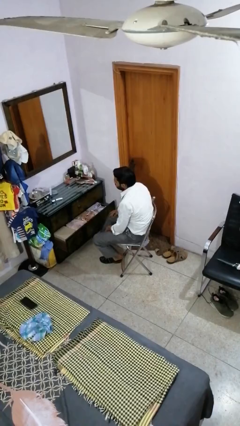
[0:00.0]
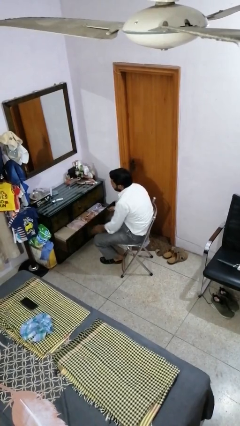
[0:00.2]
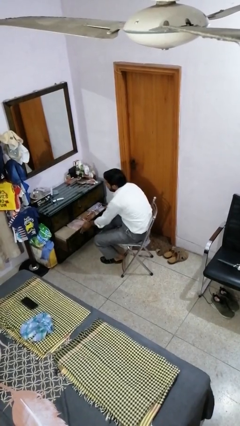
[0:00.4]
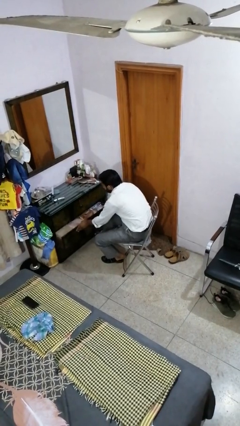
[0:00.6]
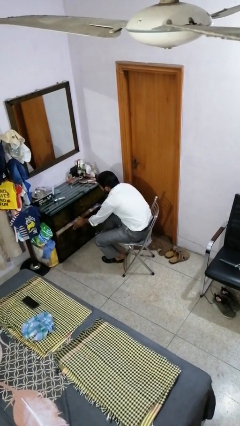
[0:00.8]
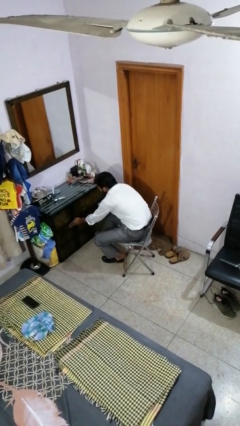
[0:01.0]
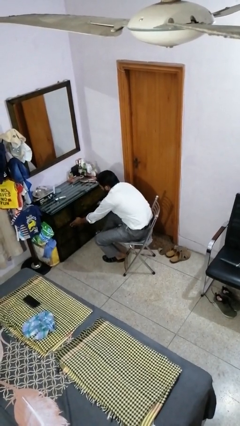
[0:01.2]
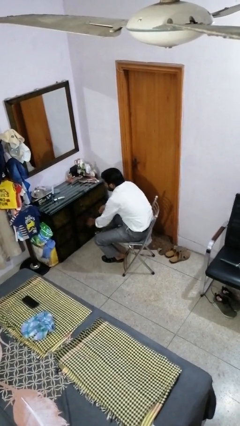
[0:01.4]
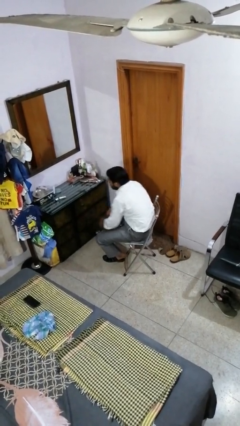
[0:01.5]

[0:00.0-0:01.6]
person closes dresser drawer

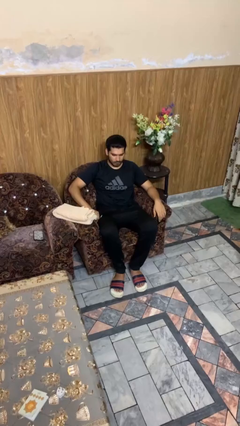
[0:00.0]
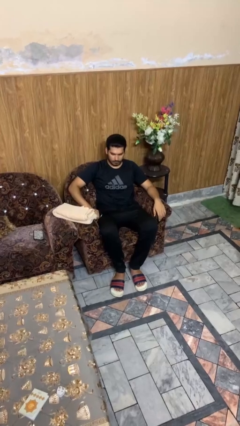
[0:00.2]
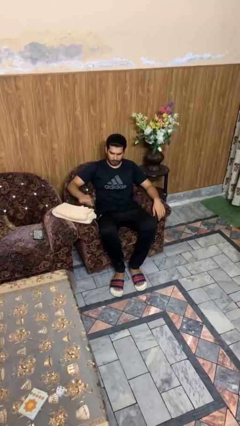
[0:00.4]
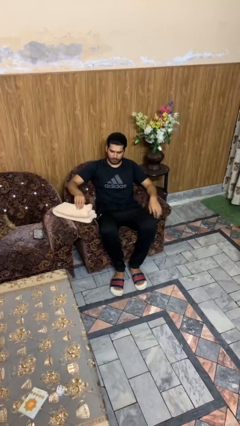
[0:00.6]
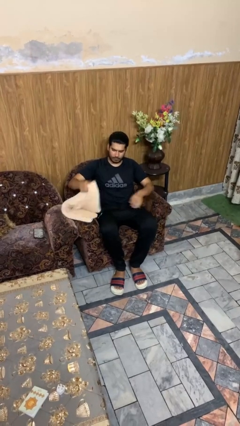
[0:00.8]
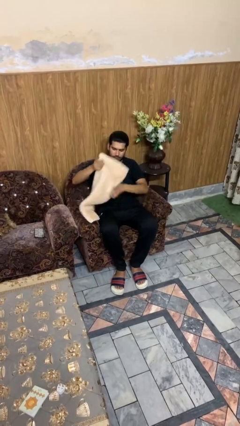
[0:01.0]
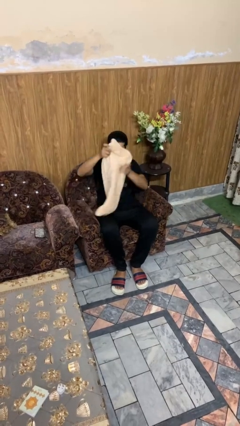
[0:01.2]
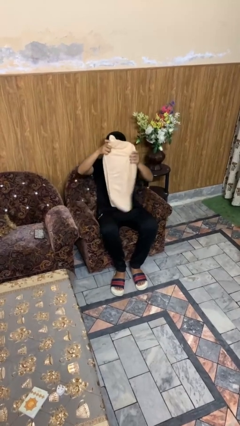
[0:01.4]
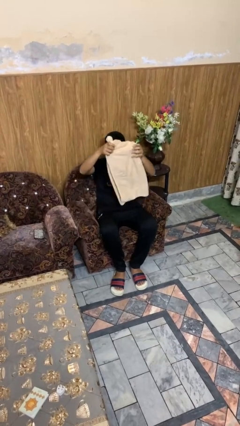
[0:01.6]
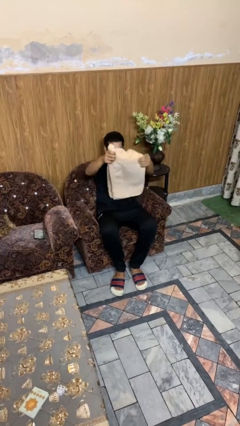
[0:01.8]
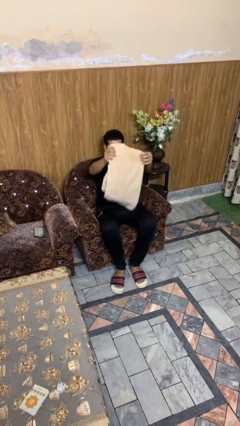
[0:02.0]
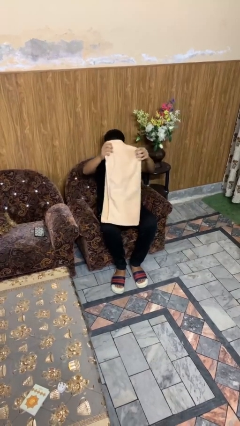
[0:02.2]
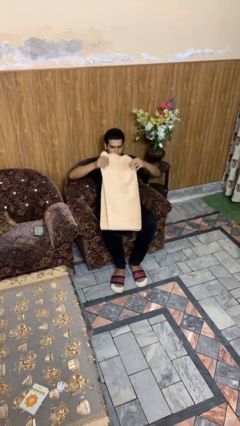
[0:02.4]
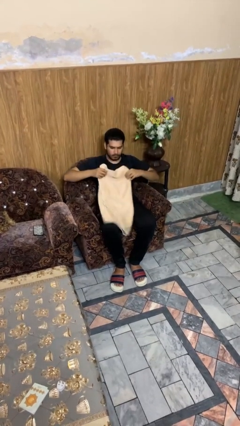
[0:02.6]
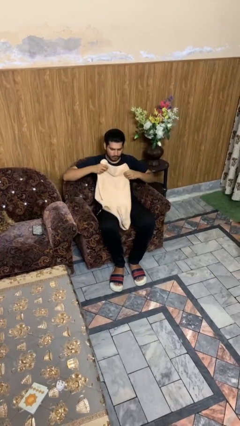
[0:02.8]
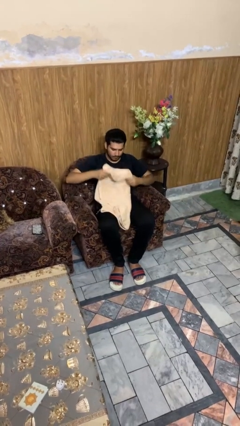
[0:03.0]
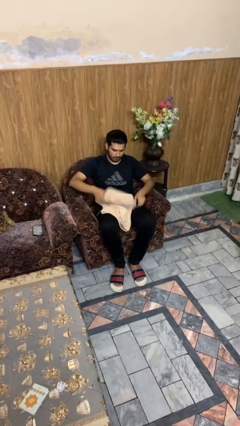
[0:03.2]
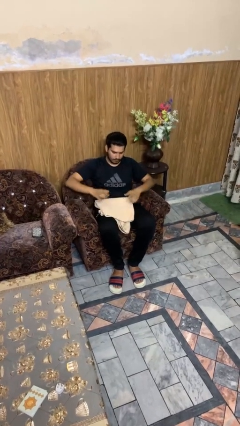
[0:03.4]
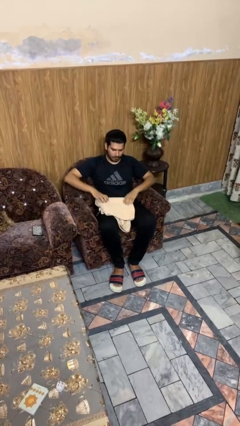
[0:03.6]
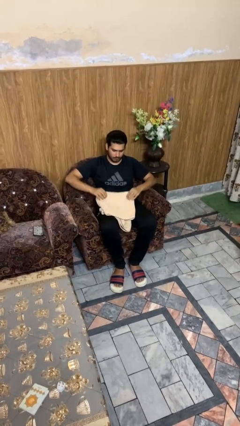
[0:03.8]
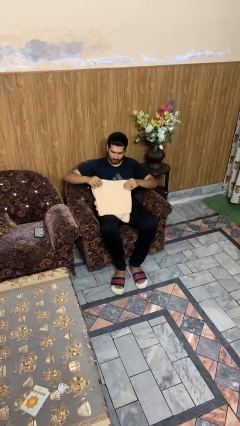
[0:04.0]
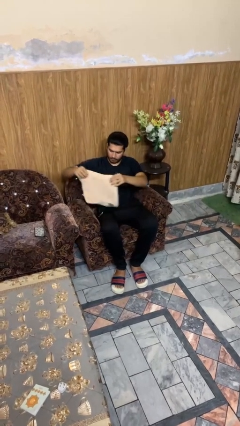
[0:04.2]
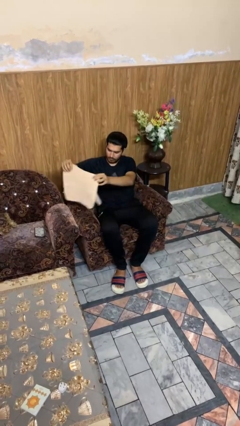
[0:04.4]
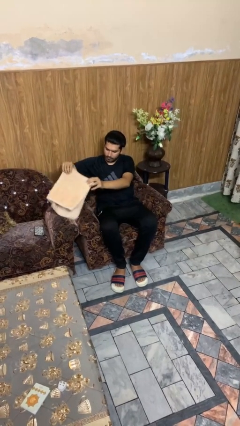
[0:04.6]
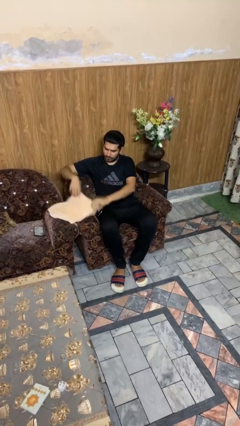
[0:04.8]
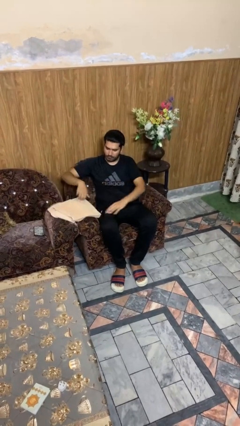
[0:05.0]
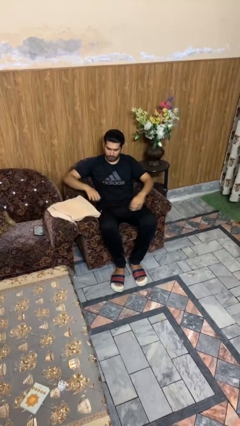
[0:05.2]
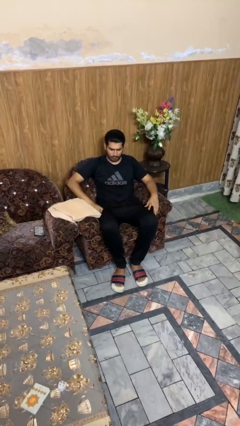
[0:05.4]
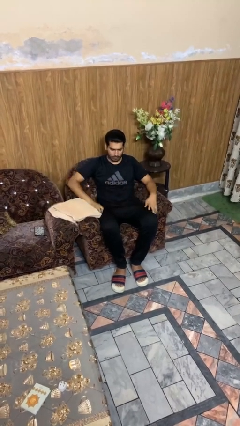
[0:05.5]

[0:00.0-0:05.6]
person folds towel

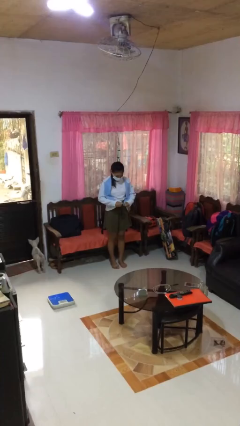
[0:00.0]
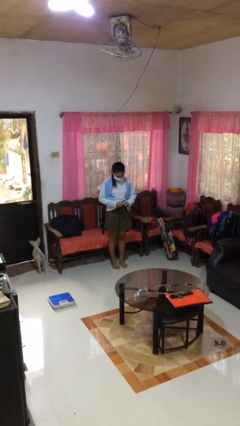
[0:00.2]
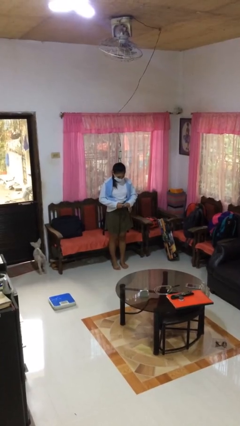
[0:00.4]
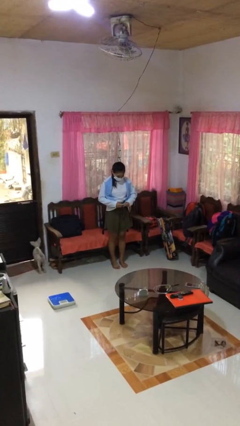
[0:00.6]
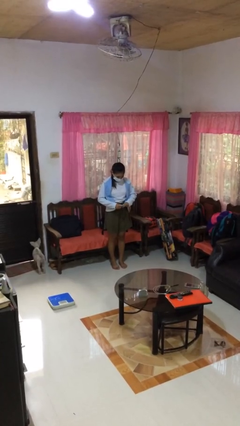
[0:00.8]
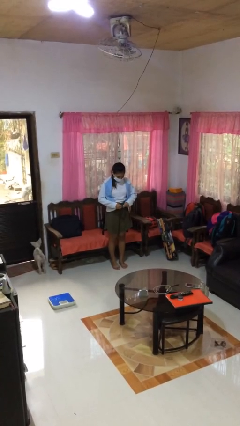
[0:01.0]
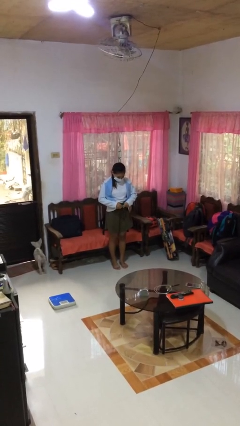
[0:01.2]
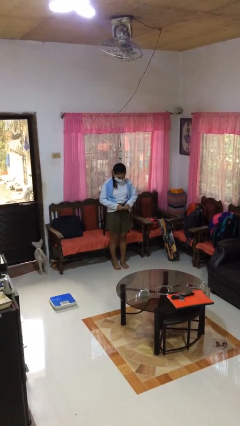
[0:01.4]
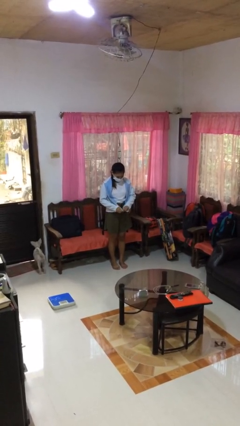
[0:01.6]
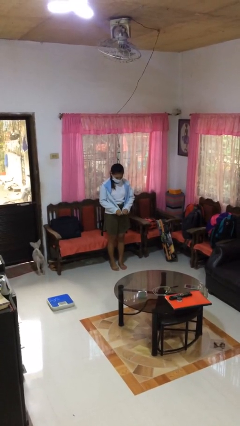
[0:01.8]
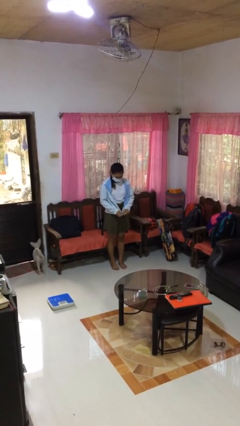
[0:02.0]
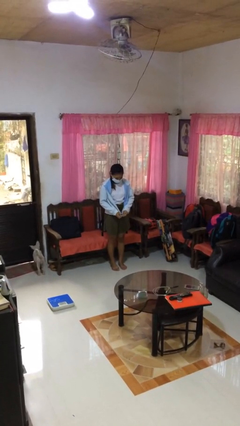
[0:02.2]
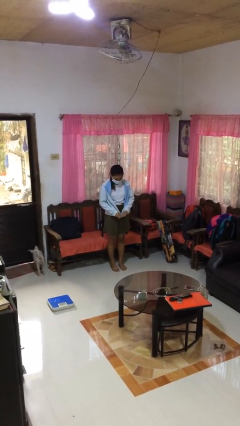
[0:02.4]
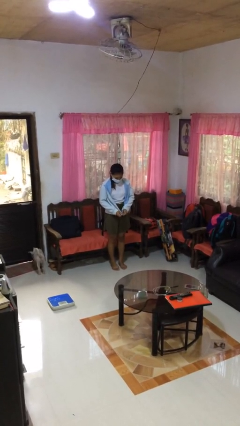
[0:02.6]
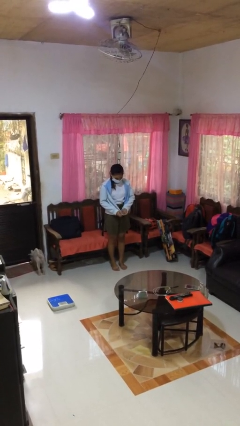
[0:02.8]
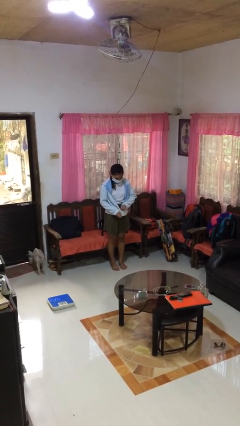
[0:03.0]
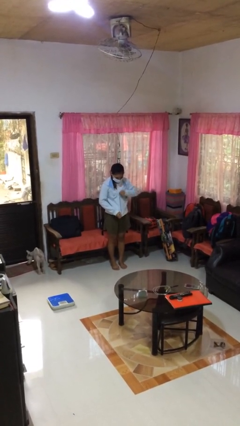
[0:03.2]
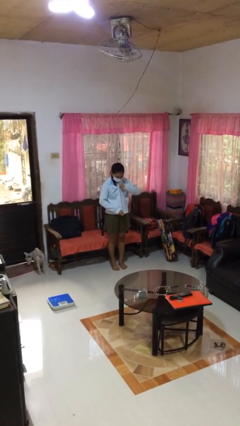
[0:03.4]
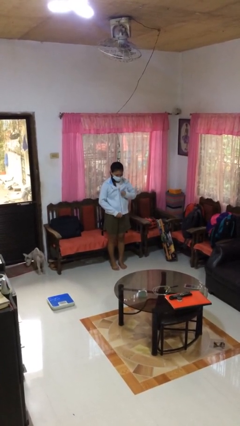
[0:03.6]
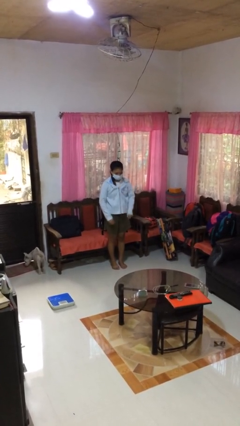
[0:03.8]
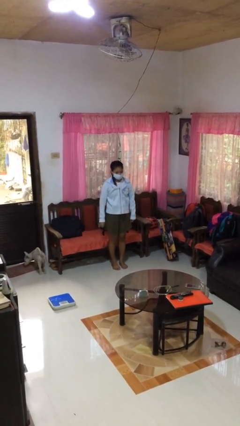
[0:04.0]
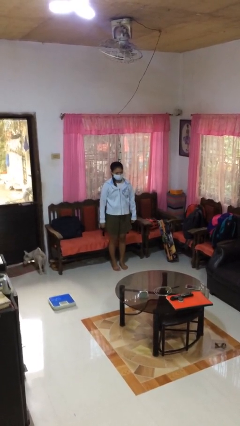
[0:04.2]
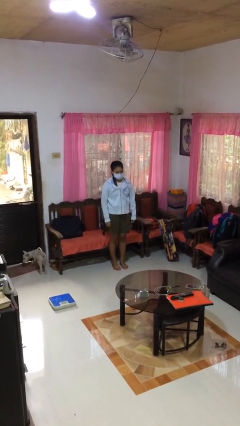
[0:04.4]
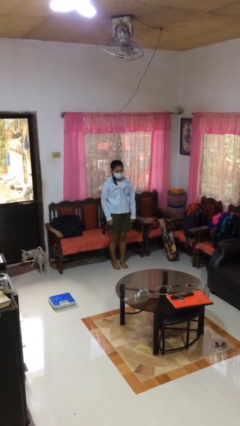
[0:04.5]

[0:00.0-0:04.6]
person zips up jacket

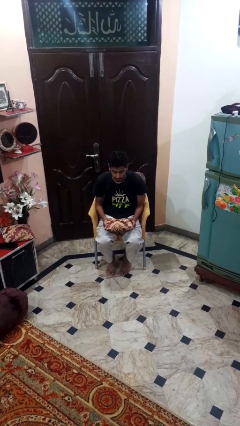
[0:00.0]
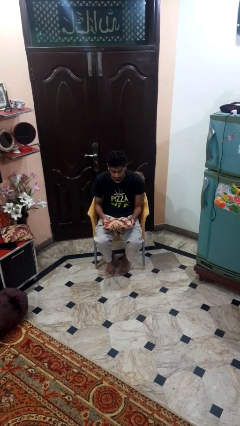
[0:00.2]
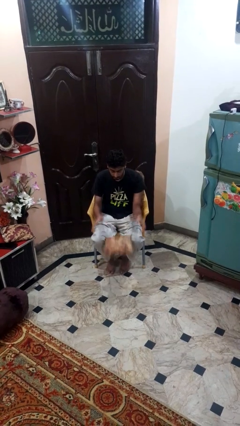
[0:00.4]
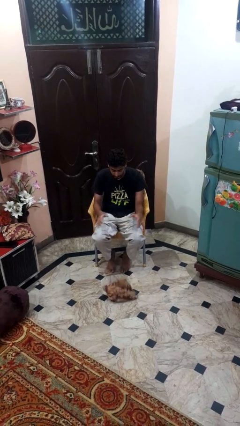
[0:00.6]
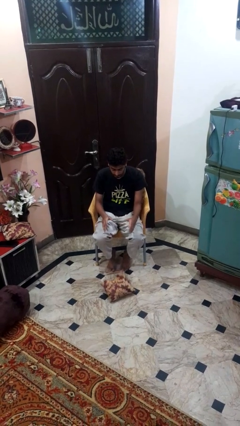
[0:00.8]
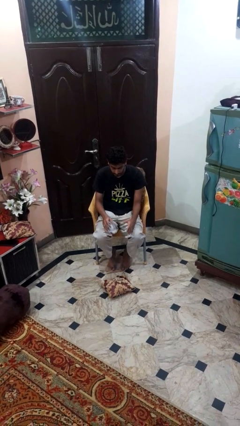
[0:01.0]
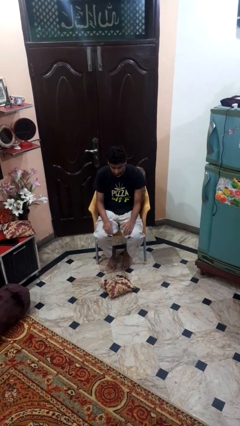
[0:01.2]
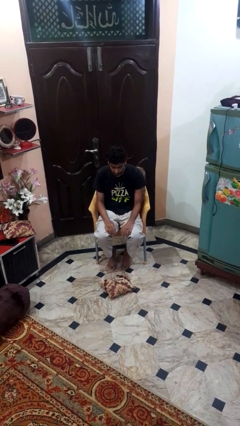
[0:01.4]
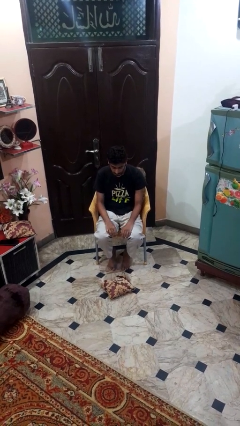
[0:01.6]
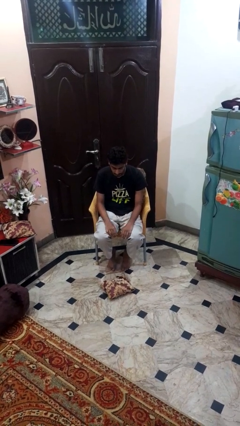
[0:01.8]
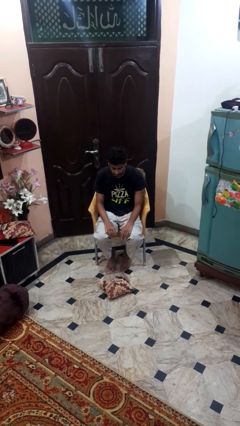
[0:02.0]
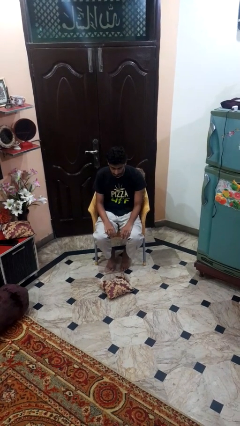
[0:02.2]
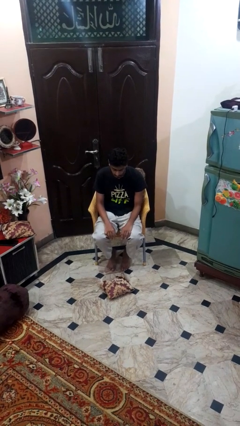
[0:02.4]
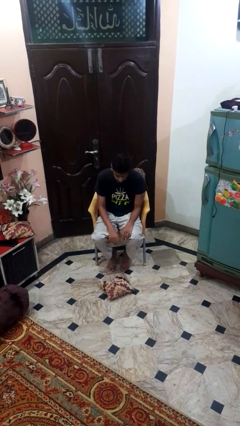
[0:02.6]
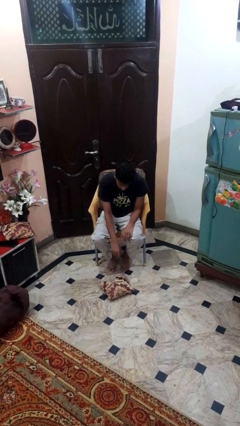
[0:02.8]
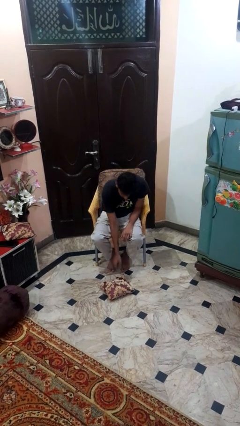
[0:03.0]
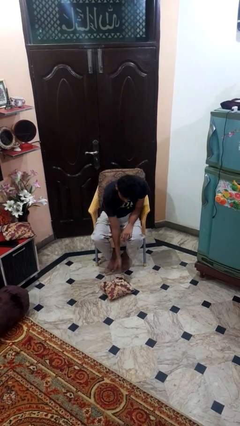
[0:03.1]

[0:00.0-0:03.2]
person drops object

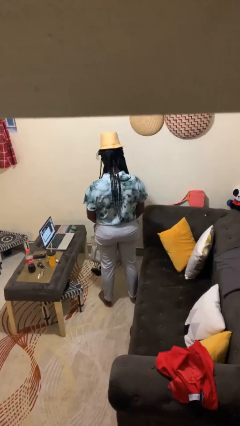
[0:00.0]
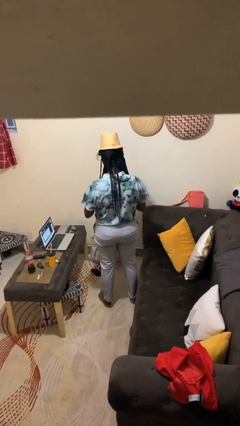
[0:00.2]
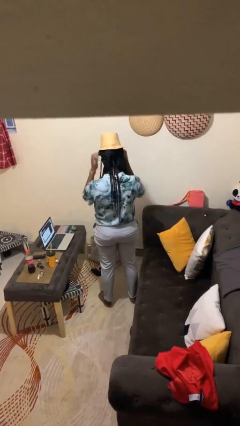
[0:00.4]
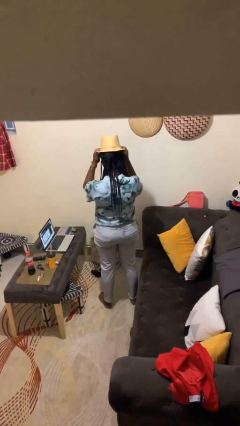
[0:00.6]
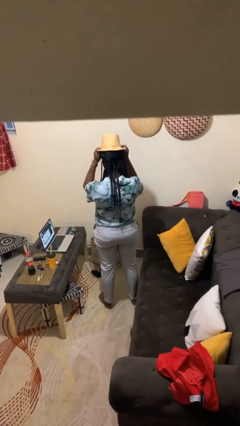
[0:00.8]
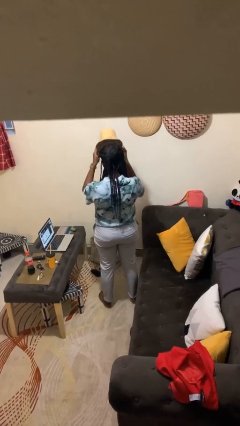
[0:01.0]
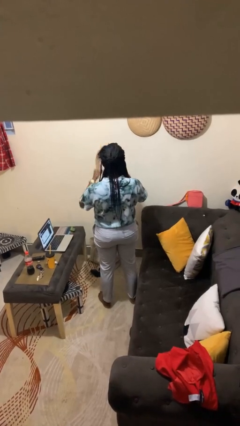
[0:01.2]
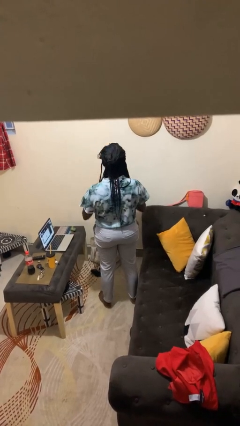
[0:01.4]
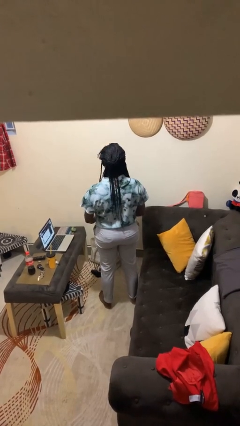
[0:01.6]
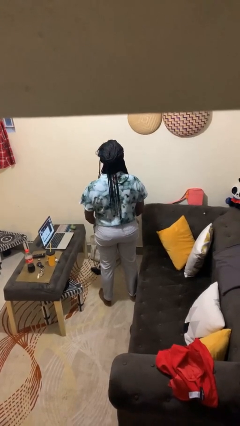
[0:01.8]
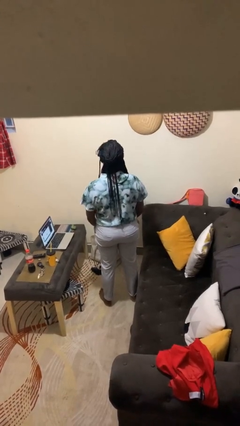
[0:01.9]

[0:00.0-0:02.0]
person takes off hat
